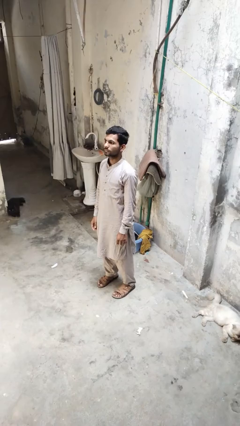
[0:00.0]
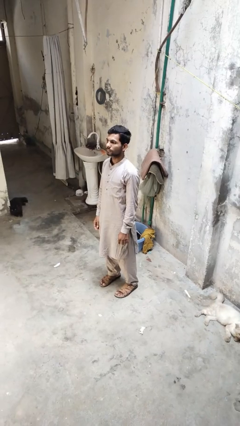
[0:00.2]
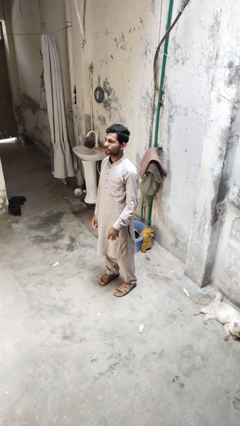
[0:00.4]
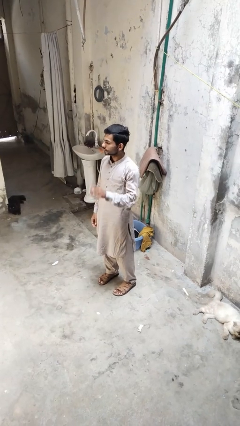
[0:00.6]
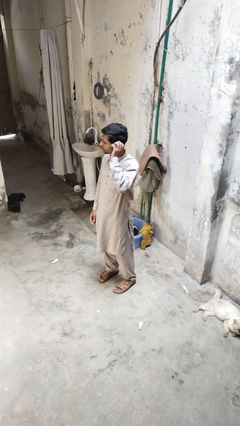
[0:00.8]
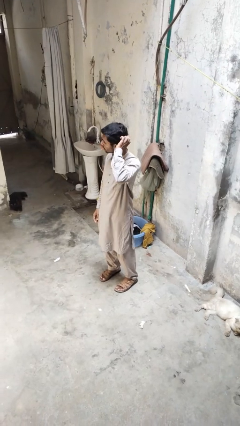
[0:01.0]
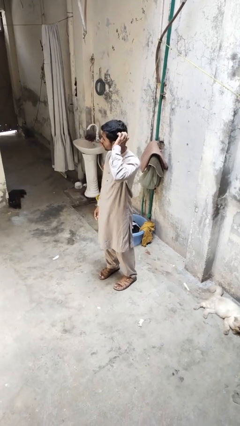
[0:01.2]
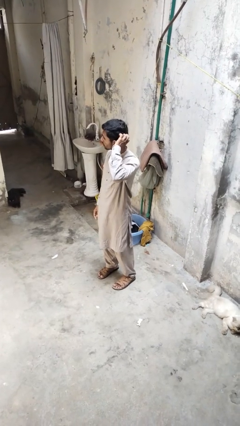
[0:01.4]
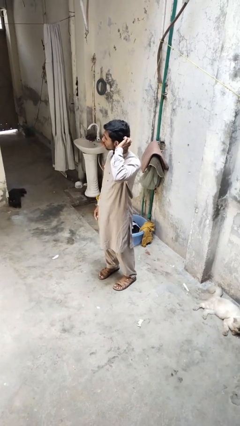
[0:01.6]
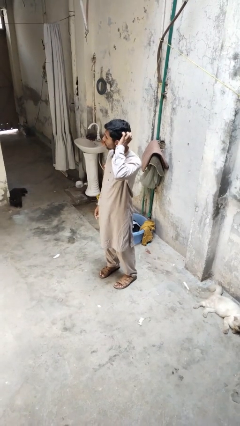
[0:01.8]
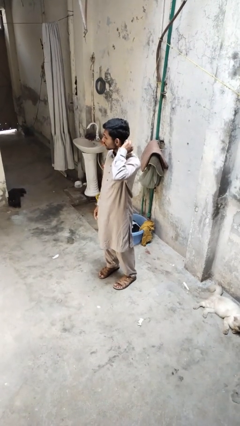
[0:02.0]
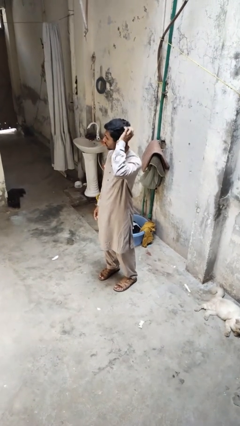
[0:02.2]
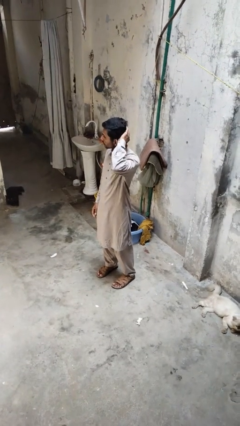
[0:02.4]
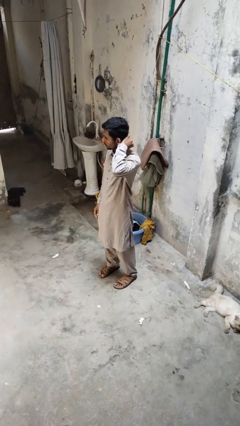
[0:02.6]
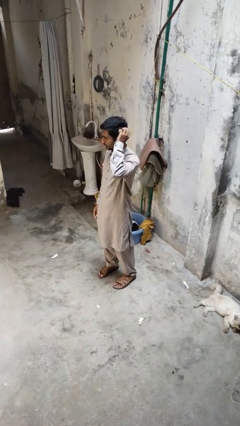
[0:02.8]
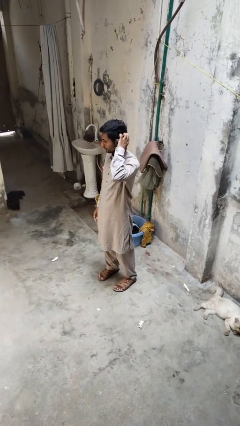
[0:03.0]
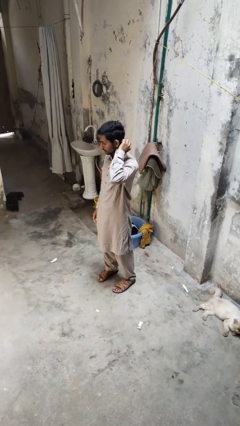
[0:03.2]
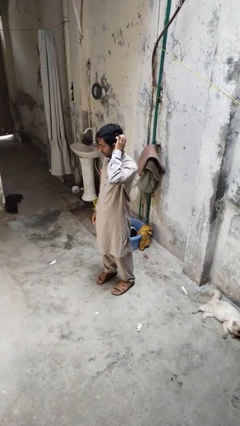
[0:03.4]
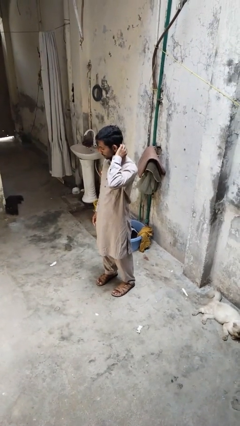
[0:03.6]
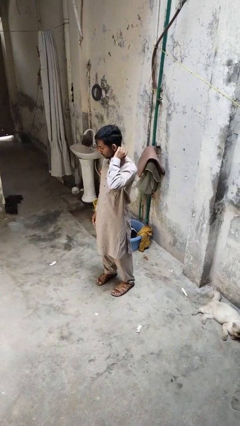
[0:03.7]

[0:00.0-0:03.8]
person scratches face

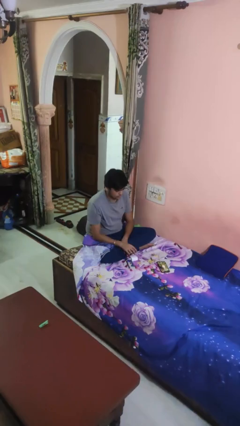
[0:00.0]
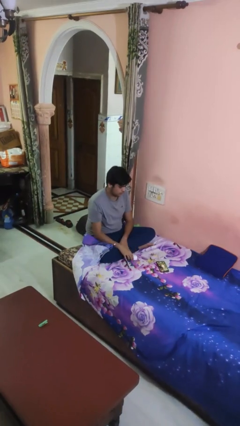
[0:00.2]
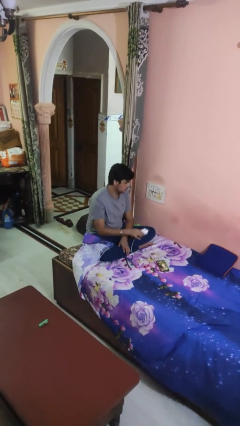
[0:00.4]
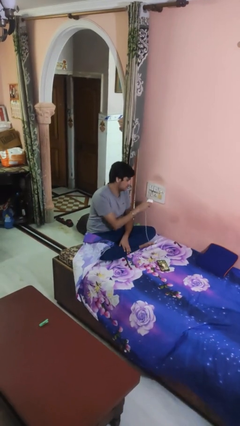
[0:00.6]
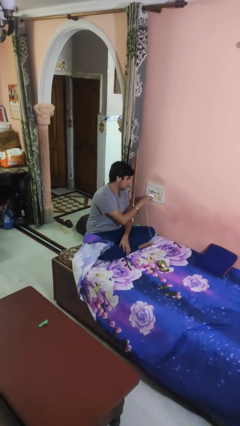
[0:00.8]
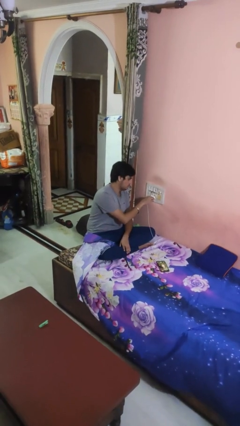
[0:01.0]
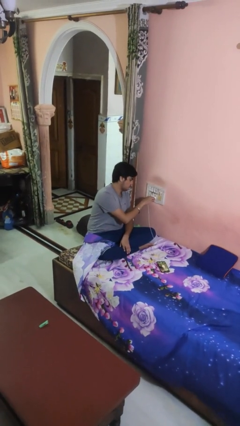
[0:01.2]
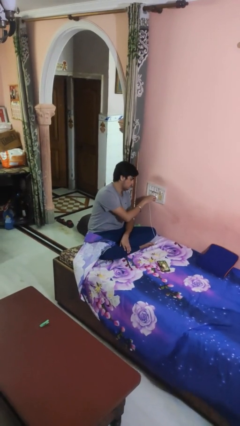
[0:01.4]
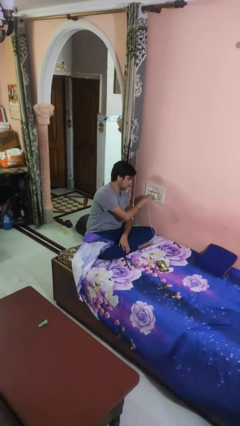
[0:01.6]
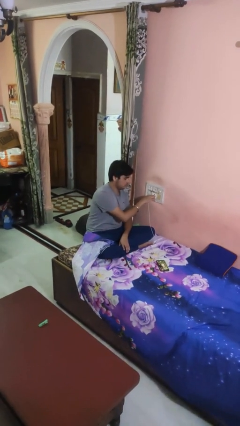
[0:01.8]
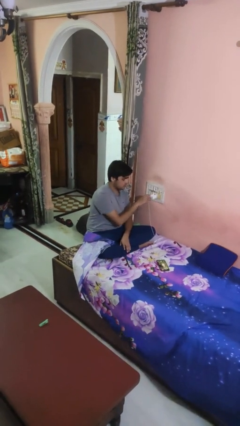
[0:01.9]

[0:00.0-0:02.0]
person plugs into electrical socket

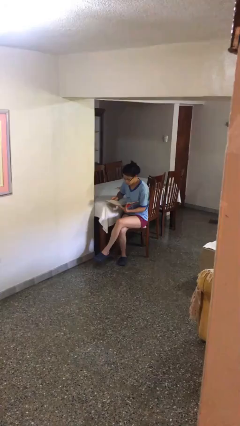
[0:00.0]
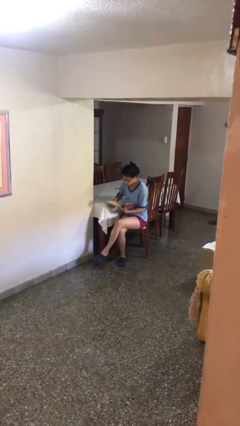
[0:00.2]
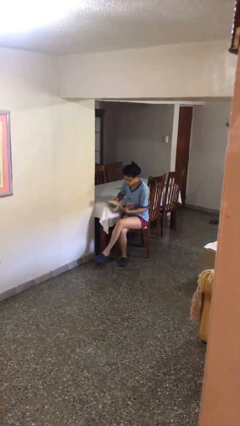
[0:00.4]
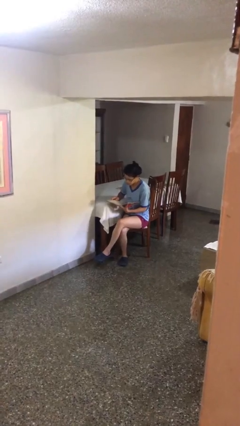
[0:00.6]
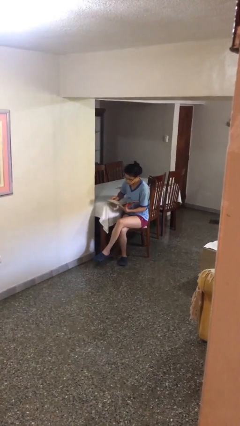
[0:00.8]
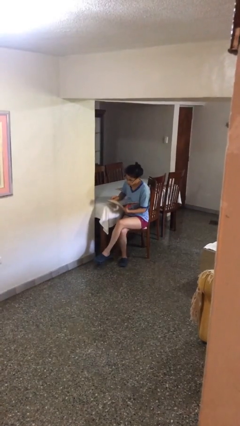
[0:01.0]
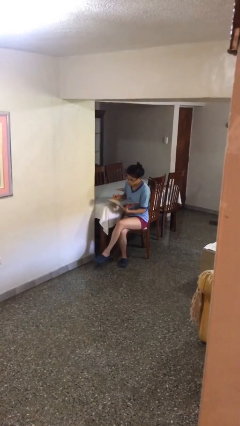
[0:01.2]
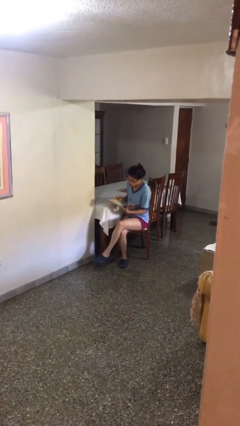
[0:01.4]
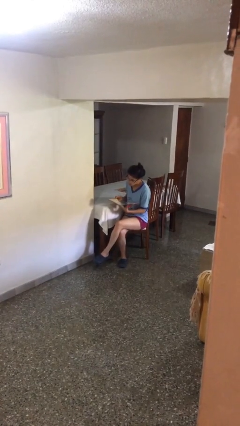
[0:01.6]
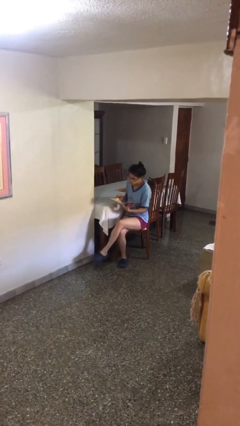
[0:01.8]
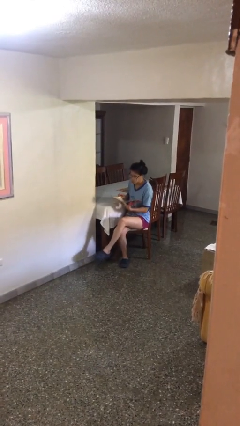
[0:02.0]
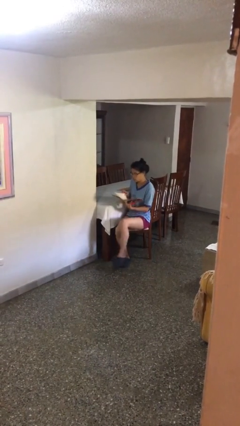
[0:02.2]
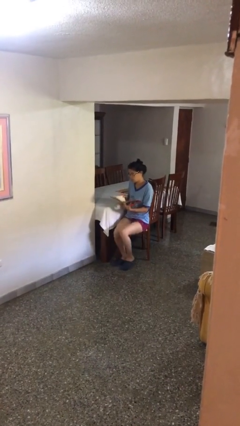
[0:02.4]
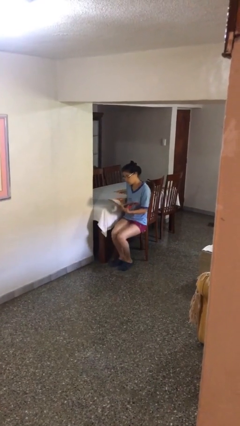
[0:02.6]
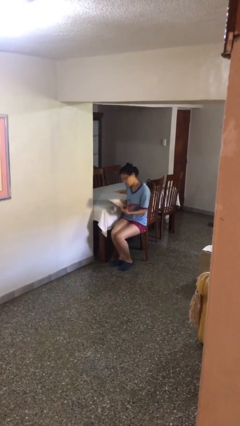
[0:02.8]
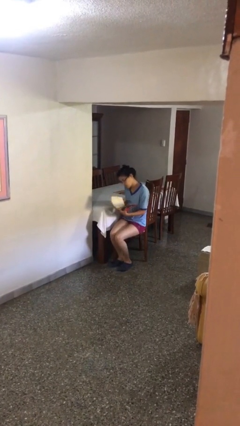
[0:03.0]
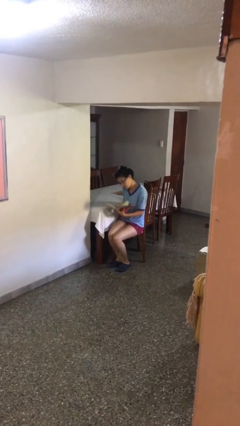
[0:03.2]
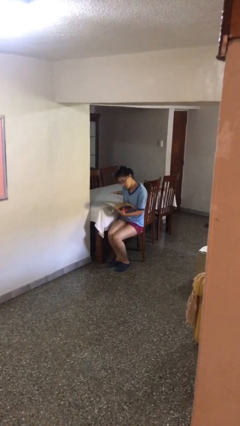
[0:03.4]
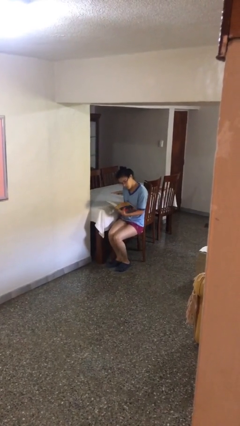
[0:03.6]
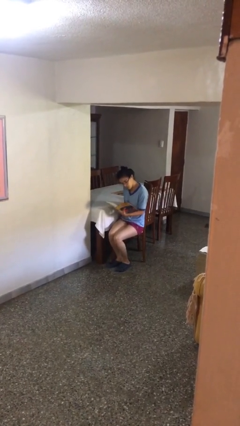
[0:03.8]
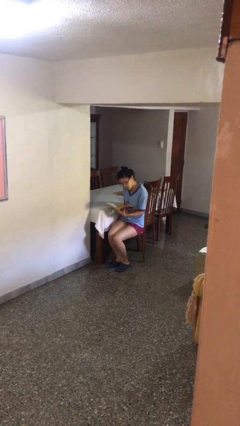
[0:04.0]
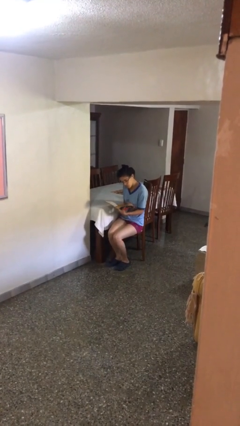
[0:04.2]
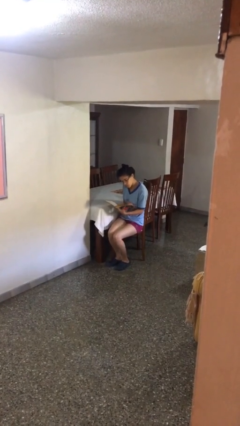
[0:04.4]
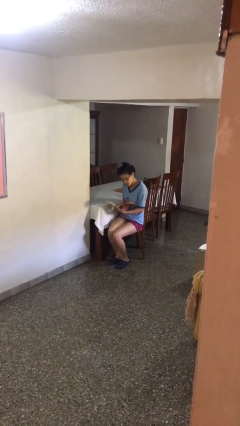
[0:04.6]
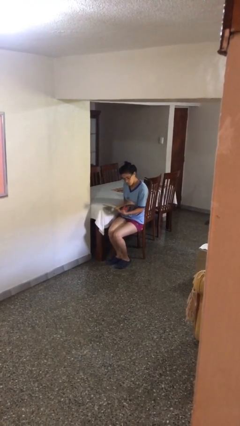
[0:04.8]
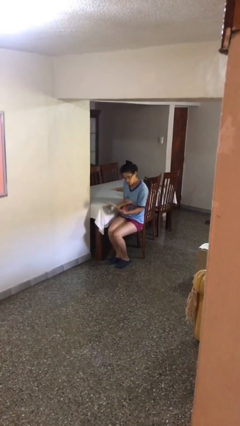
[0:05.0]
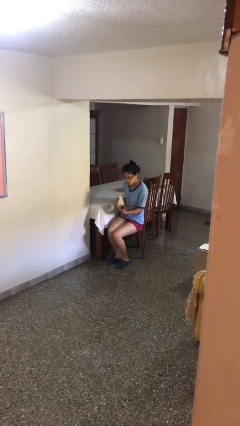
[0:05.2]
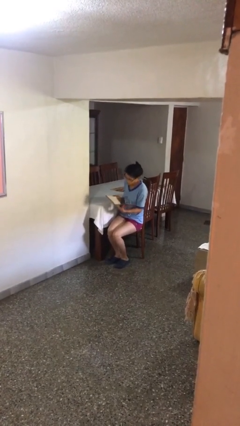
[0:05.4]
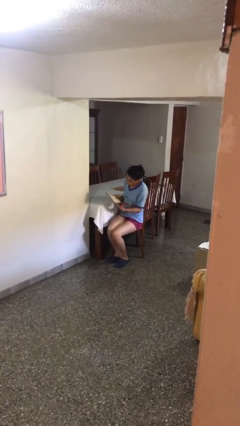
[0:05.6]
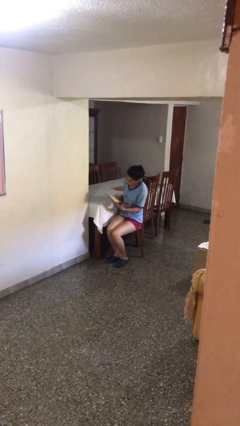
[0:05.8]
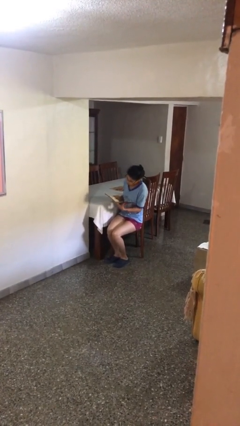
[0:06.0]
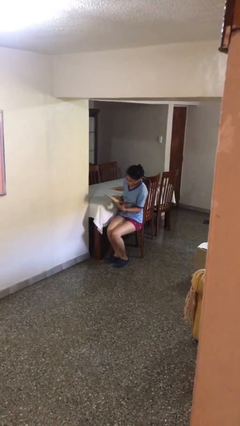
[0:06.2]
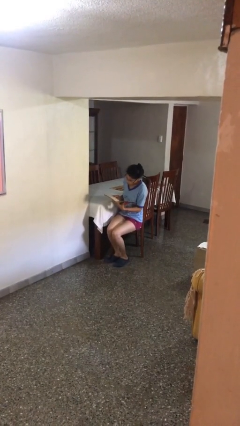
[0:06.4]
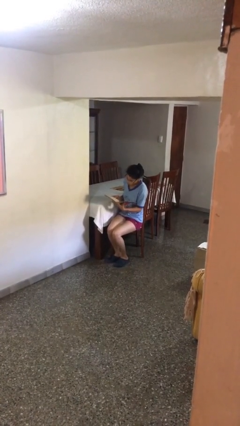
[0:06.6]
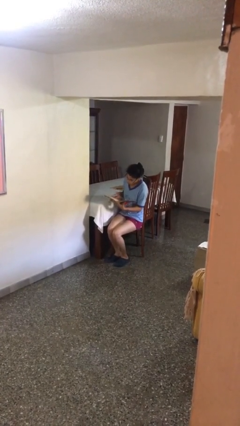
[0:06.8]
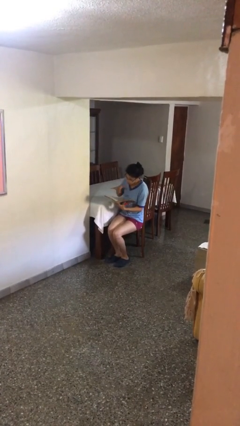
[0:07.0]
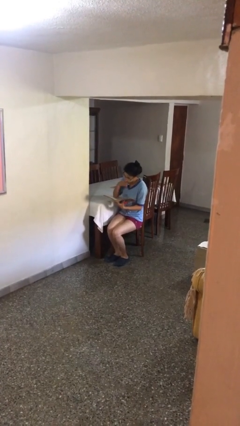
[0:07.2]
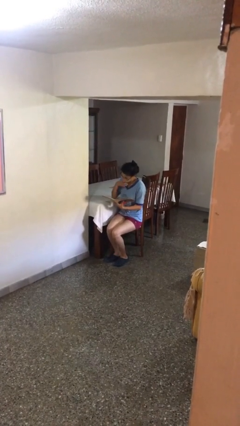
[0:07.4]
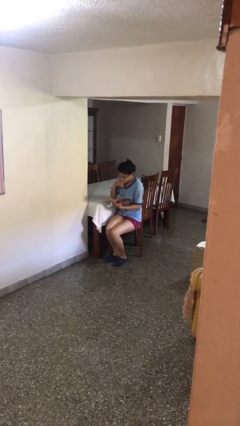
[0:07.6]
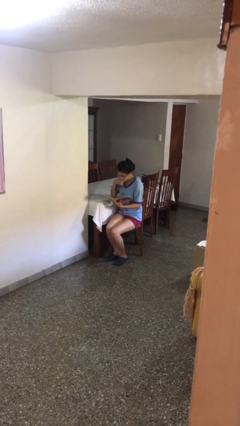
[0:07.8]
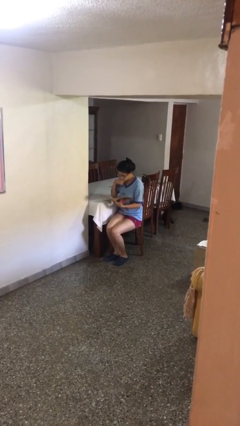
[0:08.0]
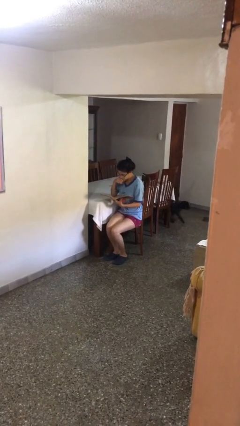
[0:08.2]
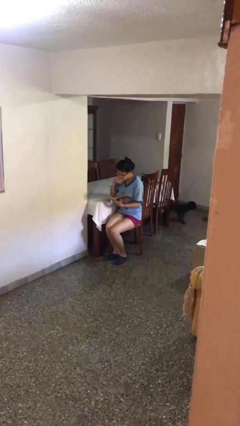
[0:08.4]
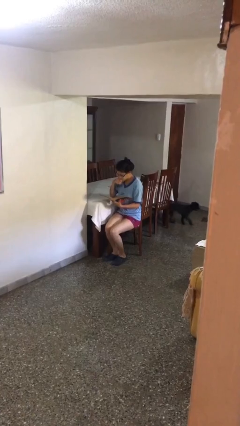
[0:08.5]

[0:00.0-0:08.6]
person reads document

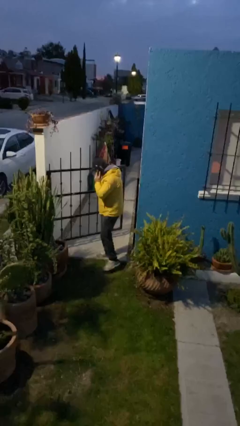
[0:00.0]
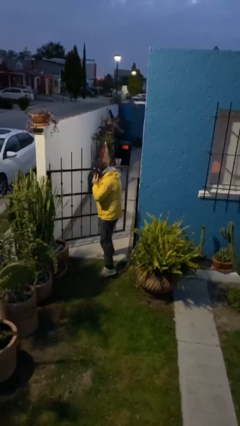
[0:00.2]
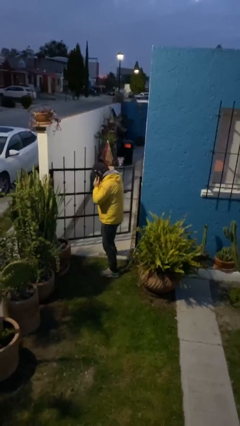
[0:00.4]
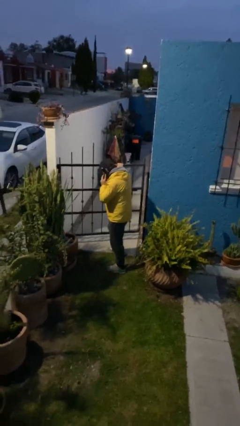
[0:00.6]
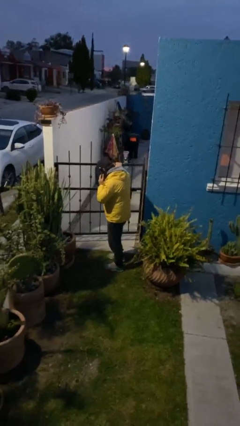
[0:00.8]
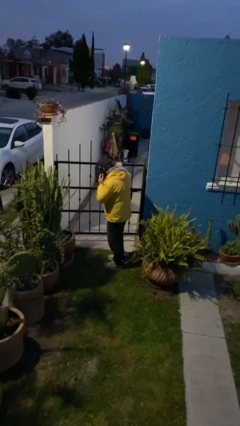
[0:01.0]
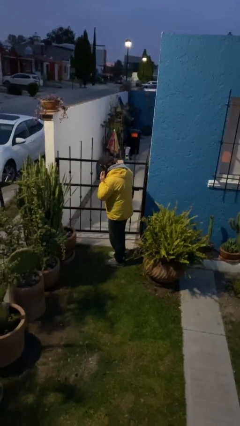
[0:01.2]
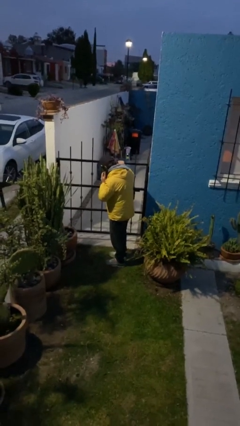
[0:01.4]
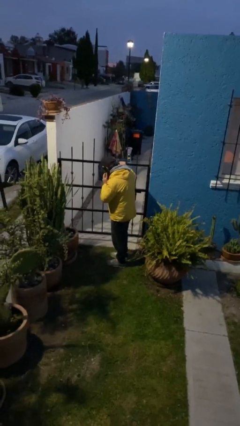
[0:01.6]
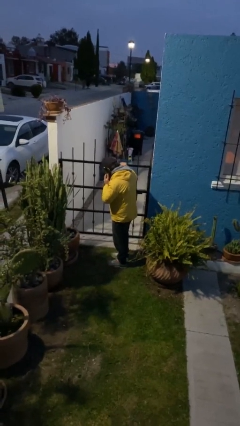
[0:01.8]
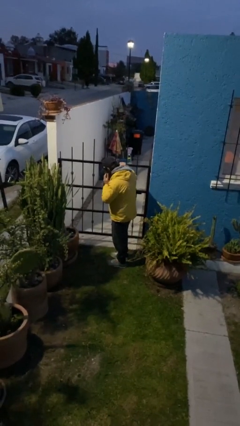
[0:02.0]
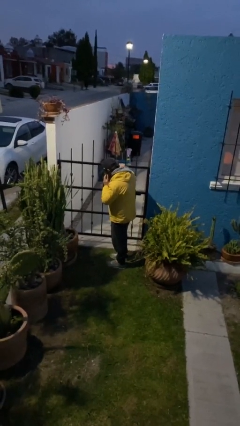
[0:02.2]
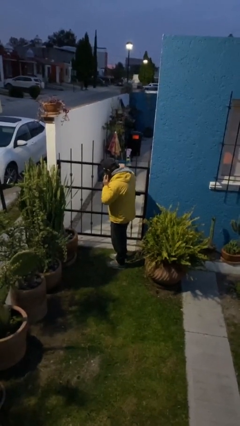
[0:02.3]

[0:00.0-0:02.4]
person closes facility door

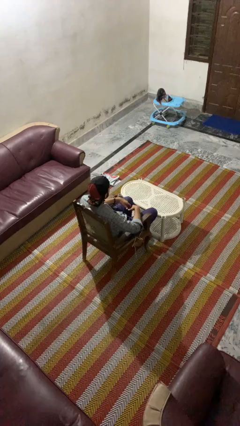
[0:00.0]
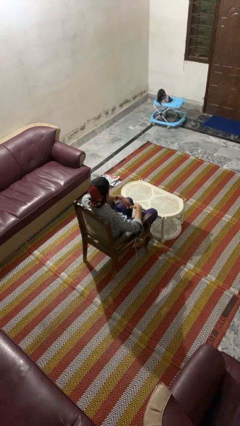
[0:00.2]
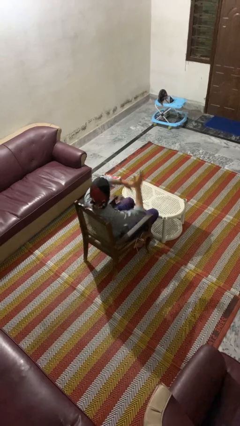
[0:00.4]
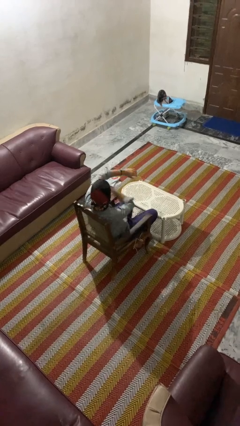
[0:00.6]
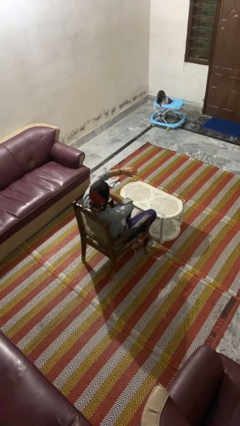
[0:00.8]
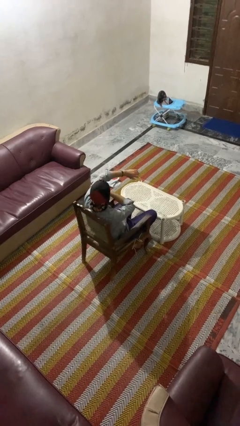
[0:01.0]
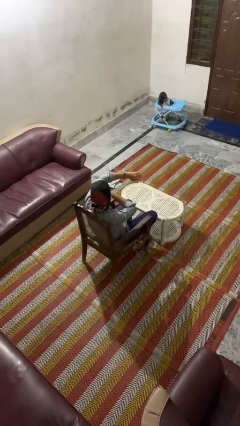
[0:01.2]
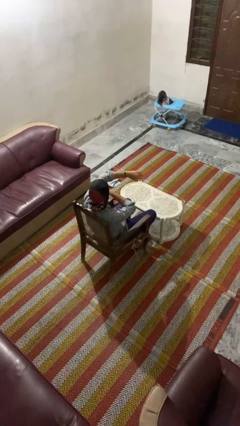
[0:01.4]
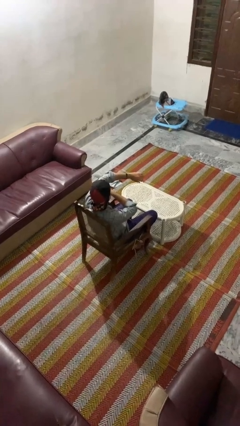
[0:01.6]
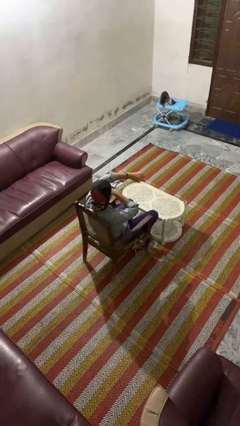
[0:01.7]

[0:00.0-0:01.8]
person swats bug
